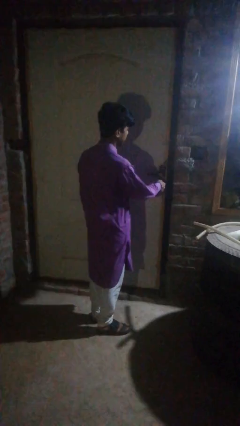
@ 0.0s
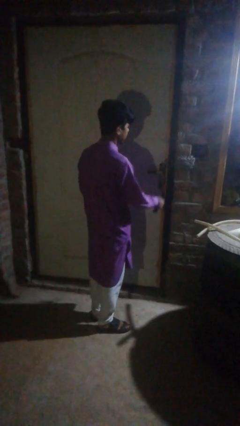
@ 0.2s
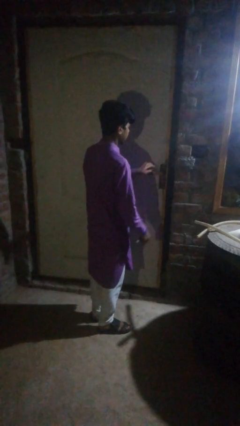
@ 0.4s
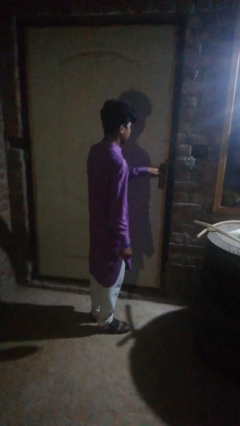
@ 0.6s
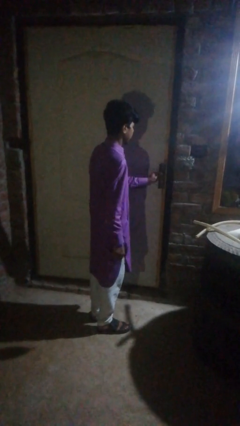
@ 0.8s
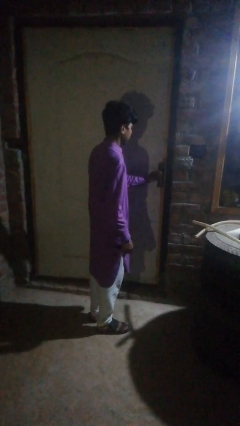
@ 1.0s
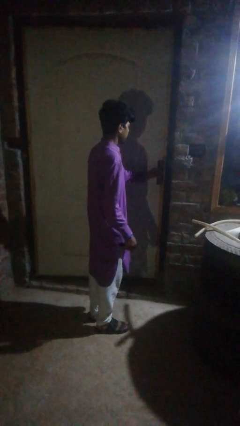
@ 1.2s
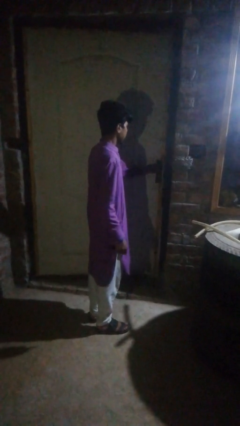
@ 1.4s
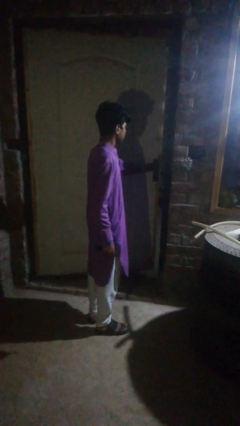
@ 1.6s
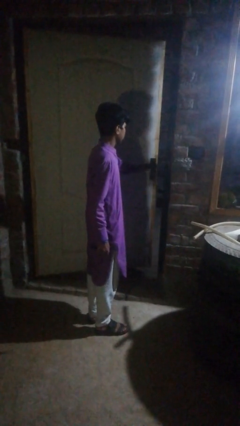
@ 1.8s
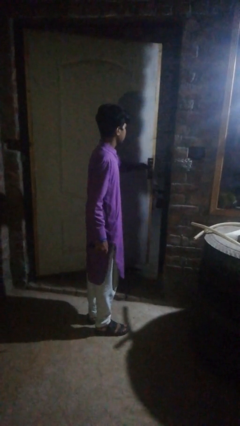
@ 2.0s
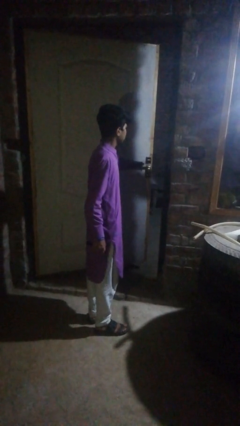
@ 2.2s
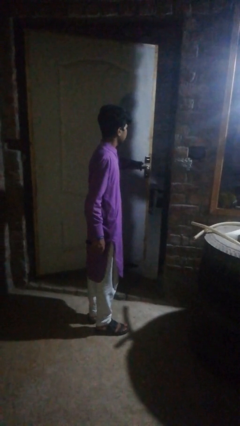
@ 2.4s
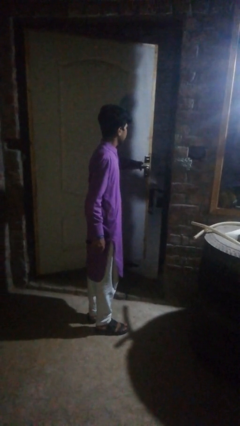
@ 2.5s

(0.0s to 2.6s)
person opens facility door

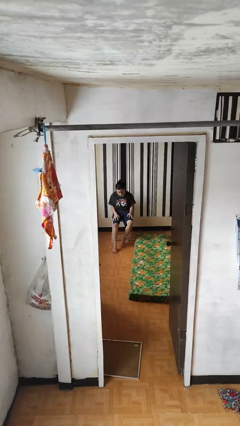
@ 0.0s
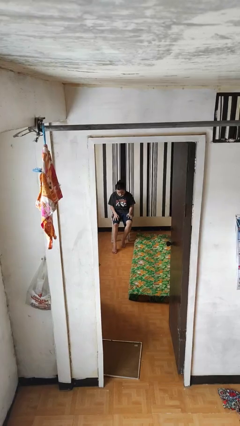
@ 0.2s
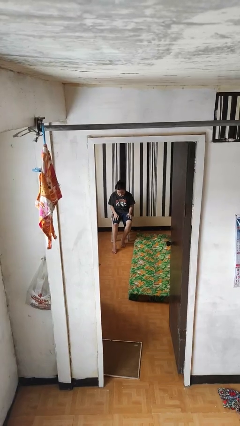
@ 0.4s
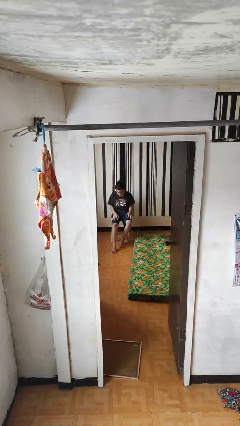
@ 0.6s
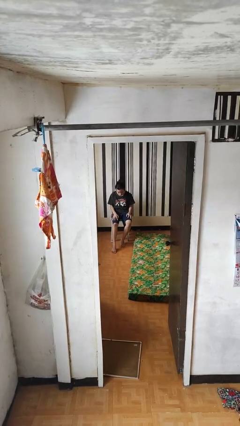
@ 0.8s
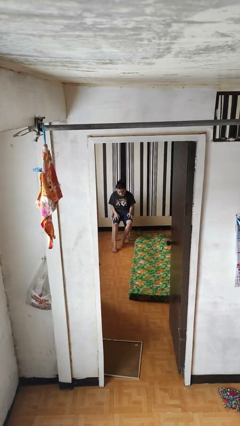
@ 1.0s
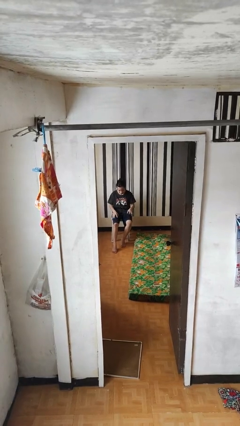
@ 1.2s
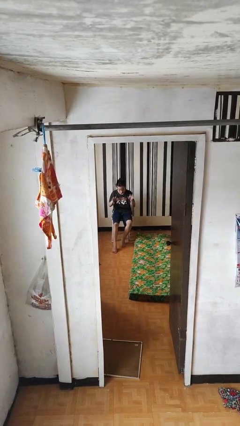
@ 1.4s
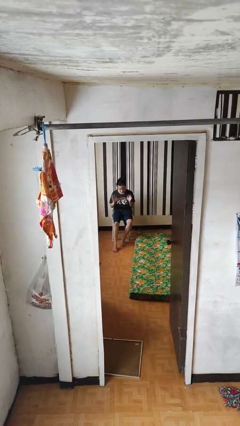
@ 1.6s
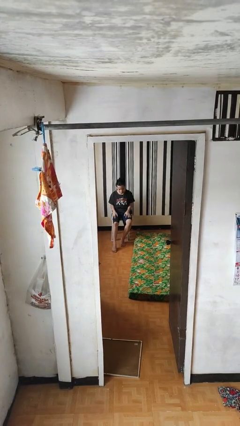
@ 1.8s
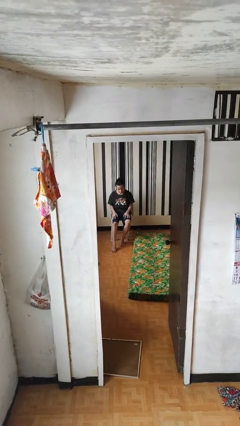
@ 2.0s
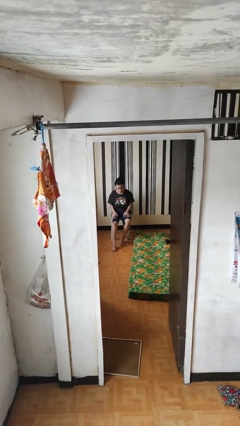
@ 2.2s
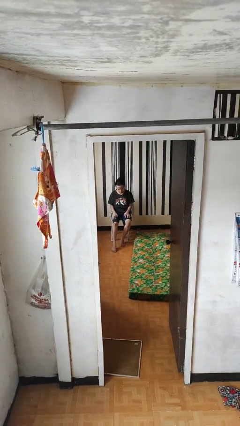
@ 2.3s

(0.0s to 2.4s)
person slaps hands on thighs

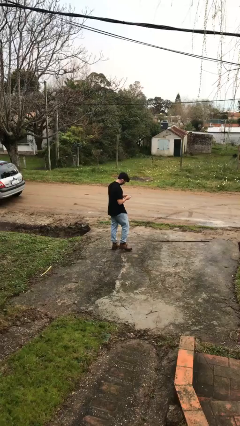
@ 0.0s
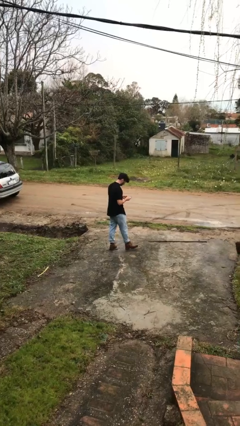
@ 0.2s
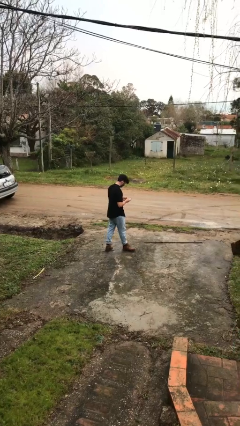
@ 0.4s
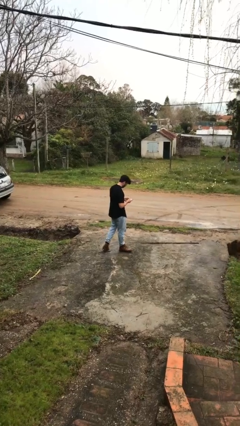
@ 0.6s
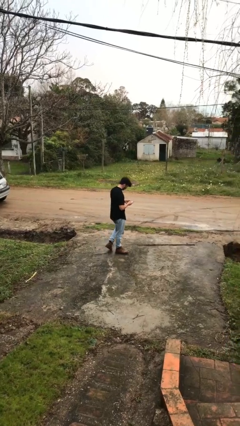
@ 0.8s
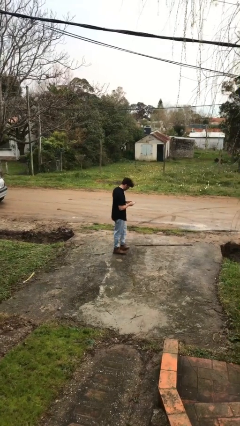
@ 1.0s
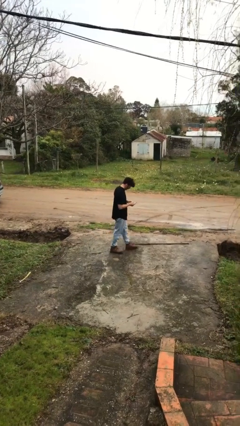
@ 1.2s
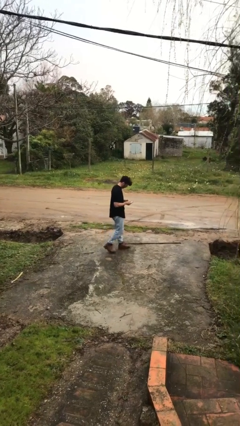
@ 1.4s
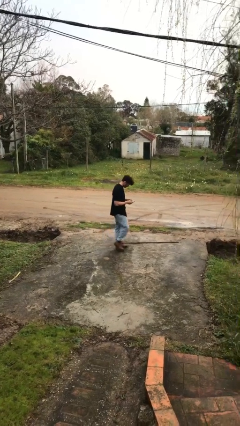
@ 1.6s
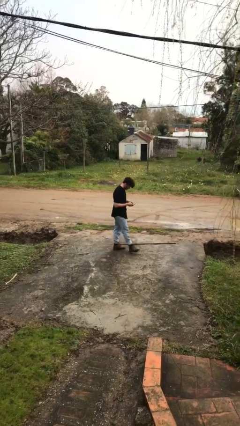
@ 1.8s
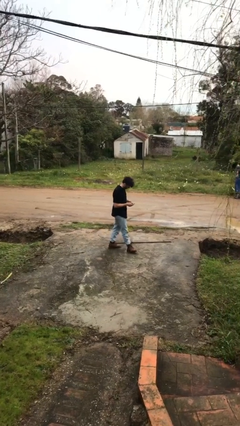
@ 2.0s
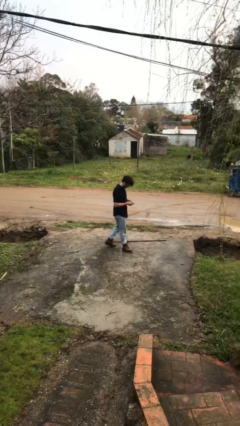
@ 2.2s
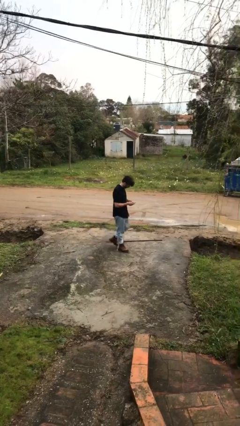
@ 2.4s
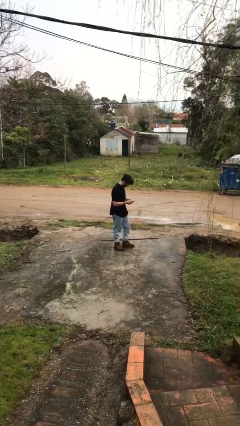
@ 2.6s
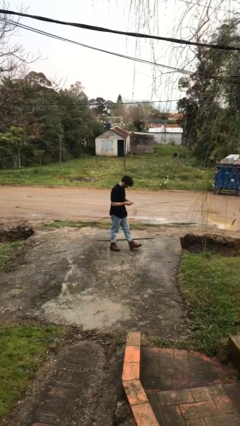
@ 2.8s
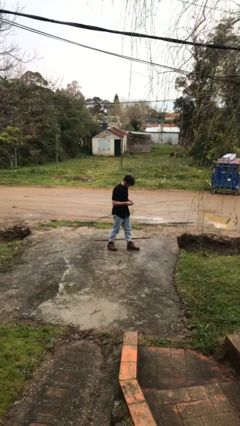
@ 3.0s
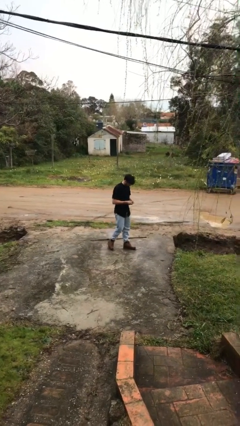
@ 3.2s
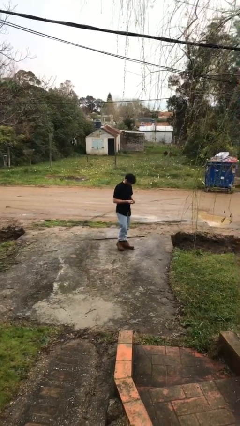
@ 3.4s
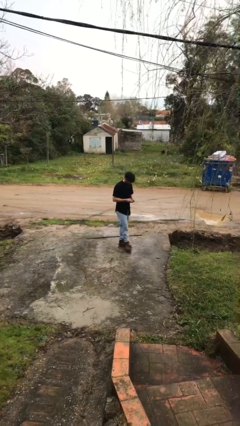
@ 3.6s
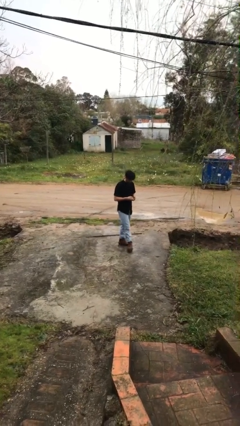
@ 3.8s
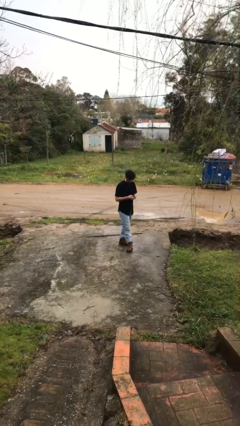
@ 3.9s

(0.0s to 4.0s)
person texts on phone

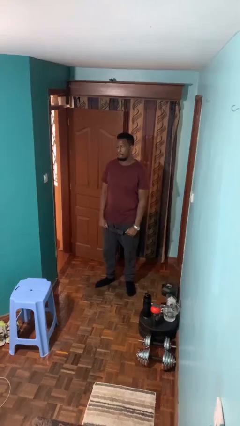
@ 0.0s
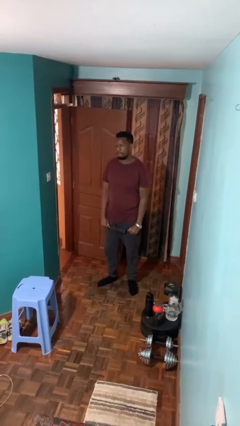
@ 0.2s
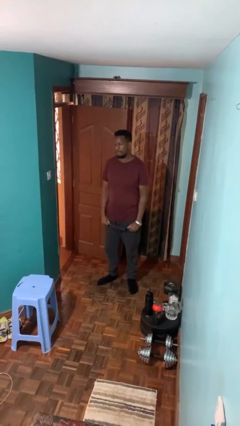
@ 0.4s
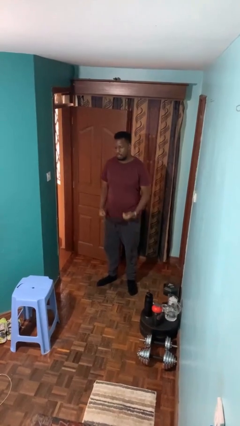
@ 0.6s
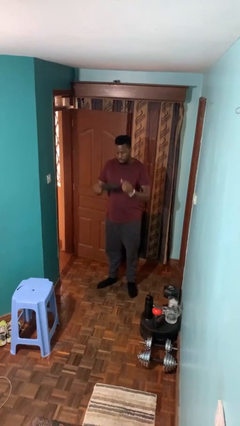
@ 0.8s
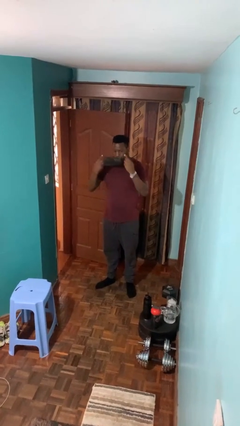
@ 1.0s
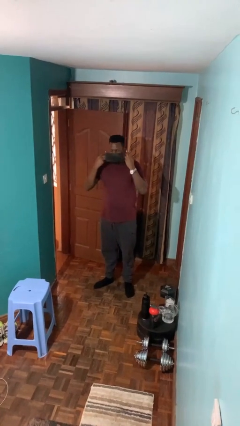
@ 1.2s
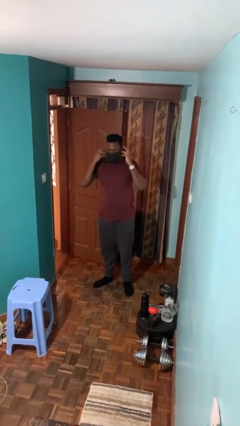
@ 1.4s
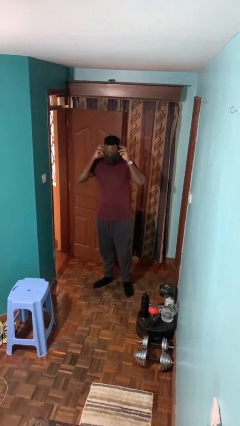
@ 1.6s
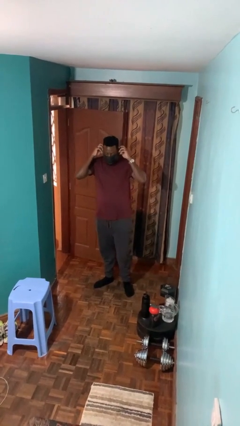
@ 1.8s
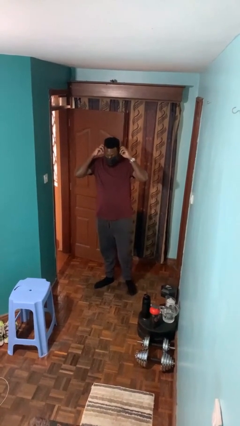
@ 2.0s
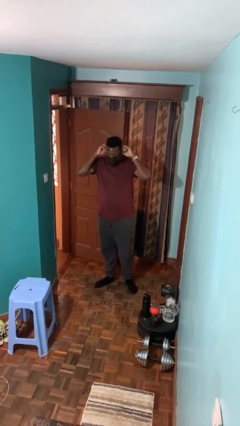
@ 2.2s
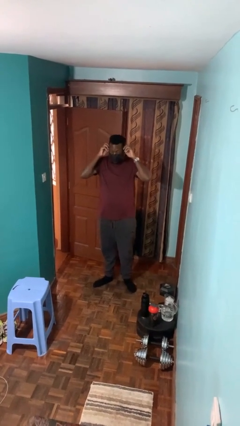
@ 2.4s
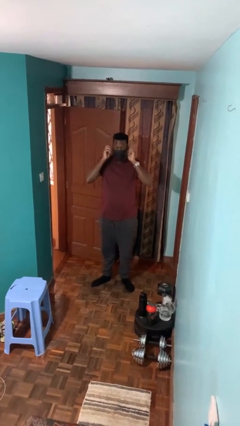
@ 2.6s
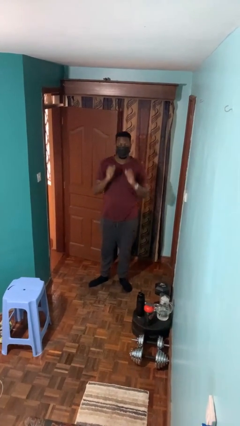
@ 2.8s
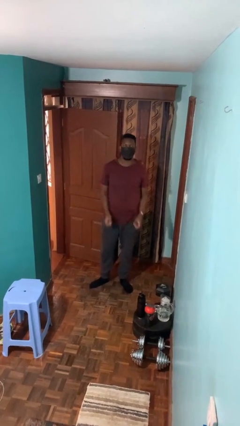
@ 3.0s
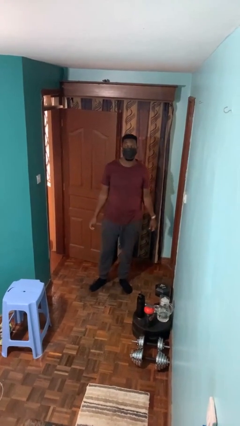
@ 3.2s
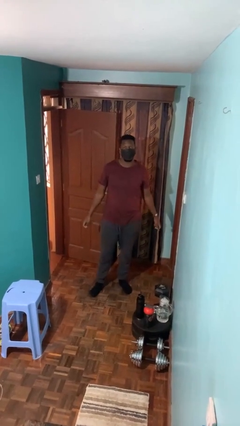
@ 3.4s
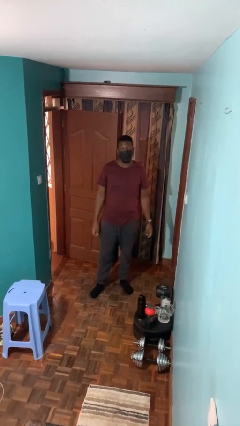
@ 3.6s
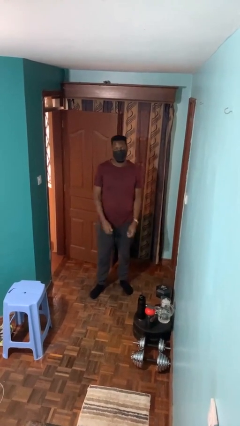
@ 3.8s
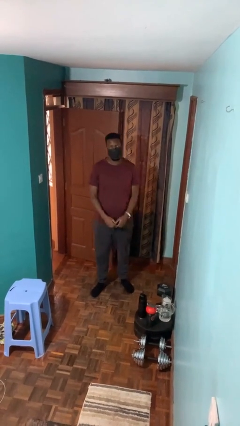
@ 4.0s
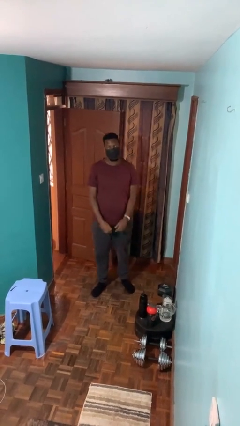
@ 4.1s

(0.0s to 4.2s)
person puts on facemask

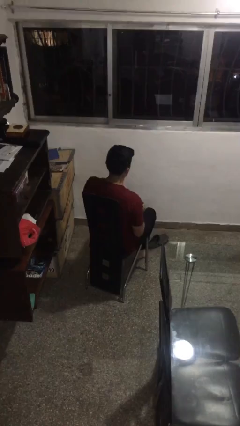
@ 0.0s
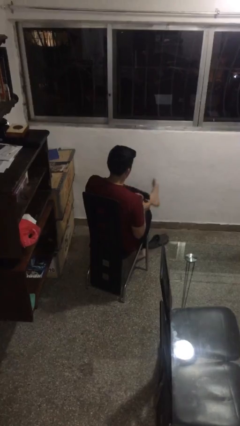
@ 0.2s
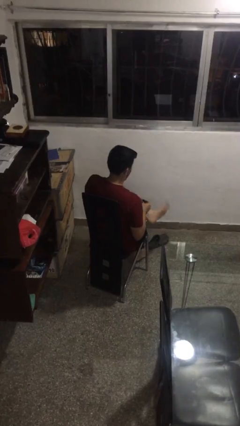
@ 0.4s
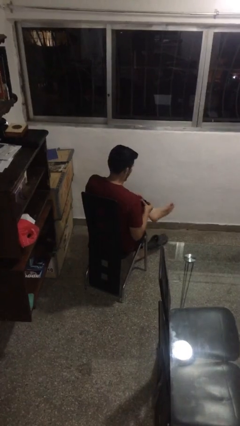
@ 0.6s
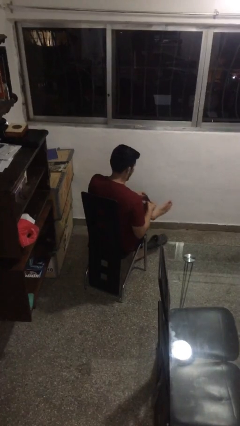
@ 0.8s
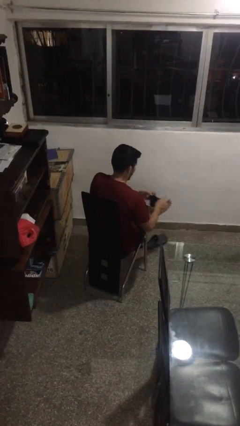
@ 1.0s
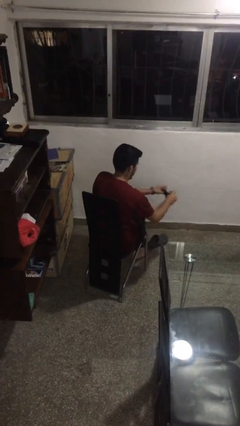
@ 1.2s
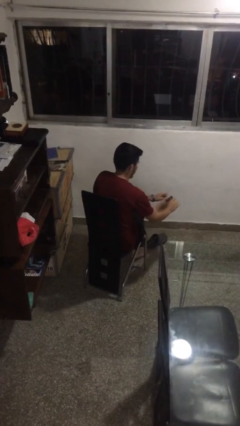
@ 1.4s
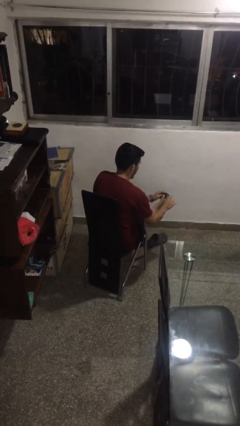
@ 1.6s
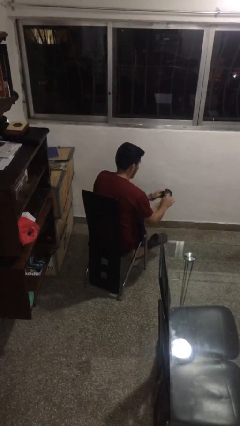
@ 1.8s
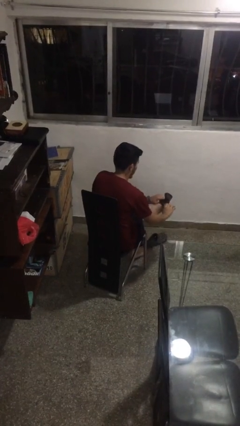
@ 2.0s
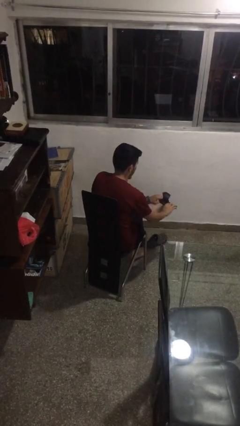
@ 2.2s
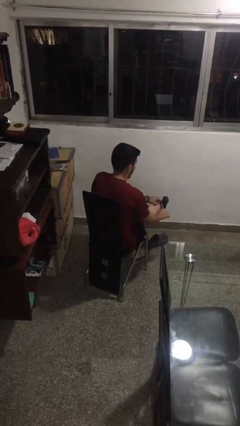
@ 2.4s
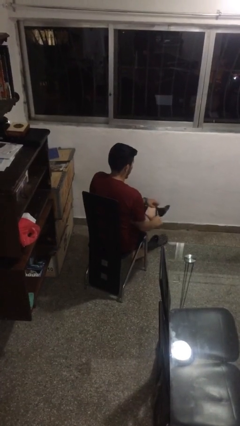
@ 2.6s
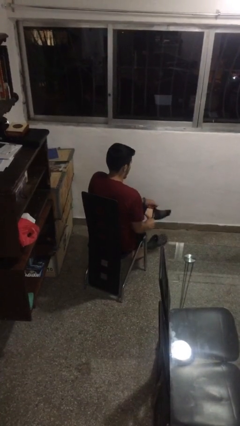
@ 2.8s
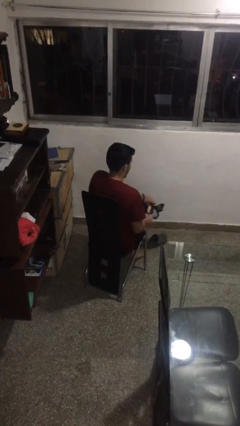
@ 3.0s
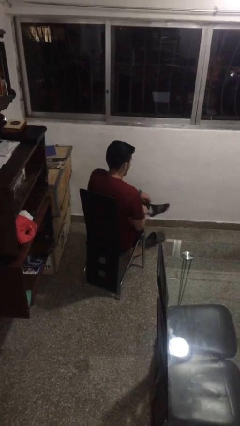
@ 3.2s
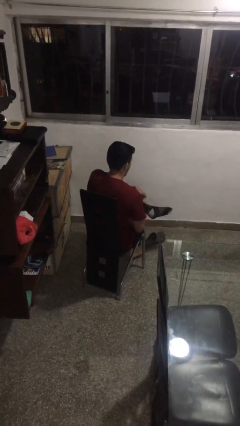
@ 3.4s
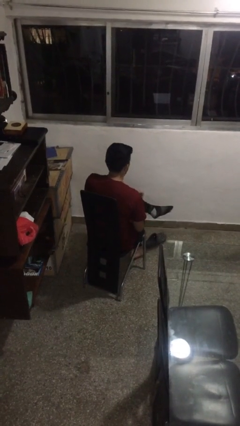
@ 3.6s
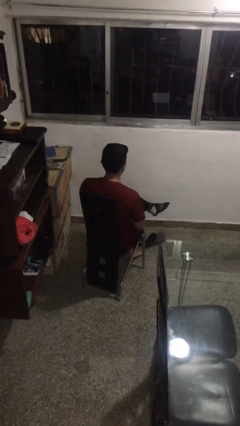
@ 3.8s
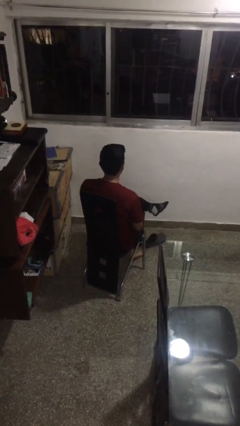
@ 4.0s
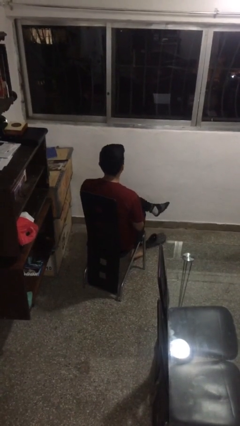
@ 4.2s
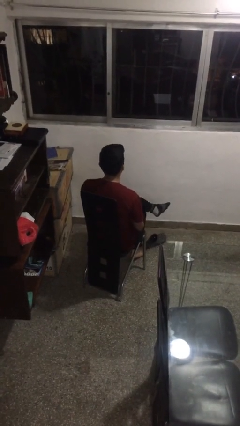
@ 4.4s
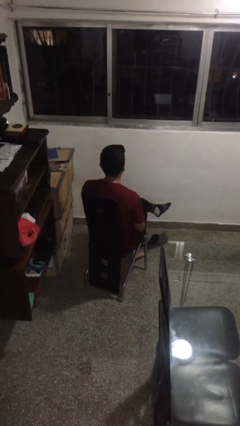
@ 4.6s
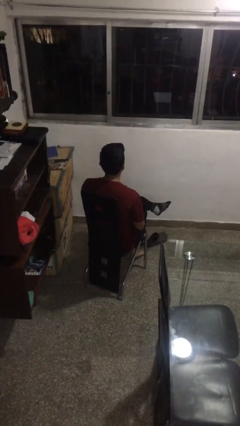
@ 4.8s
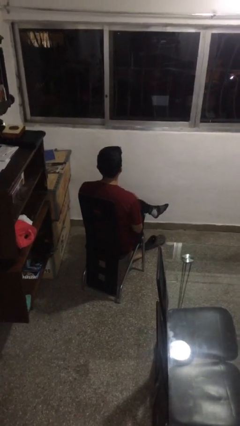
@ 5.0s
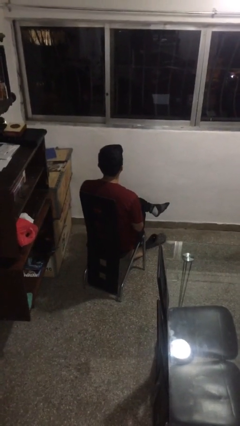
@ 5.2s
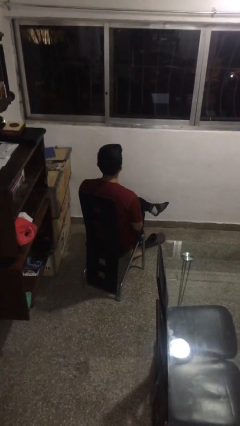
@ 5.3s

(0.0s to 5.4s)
person puts on socks
